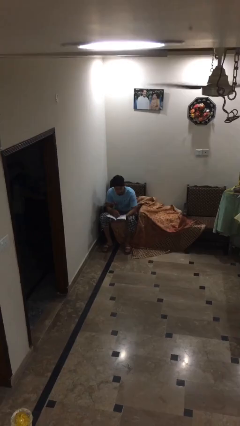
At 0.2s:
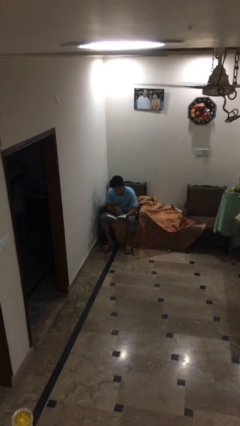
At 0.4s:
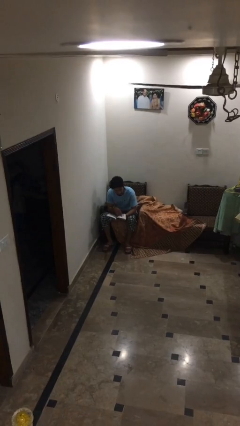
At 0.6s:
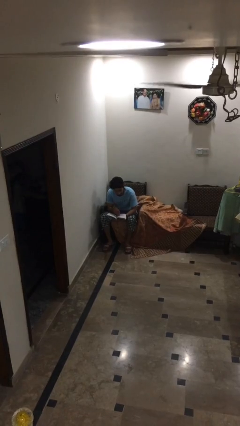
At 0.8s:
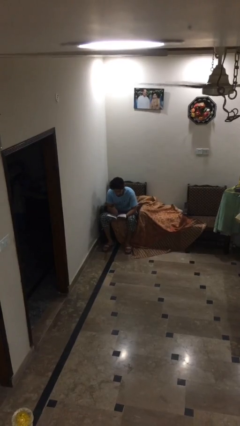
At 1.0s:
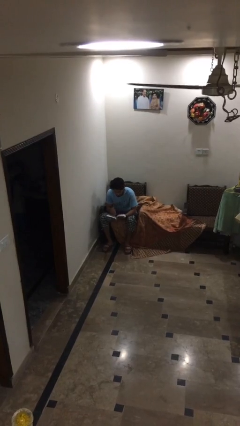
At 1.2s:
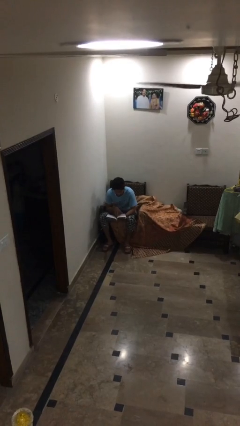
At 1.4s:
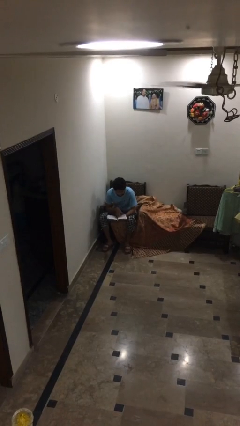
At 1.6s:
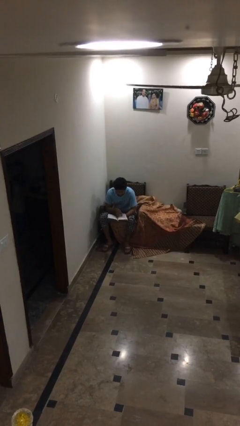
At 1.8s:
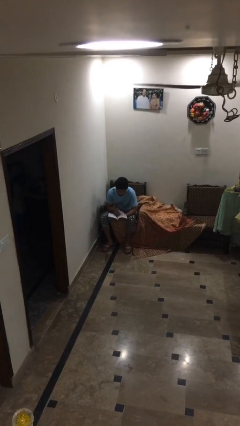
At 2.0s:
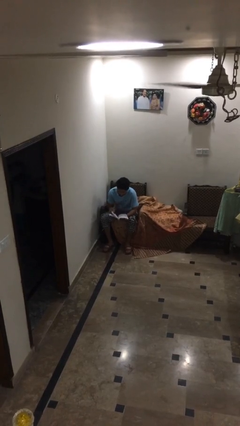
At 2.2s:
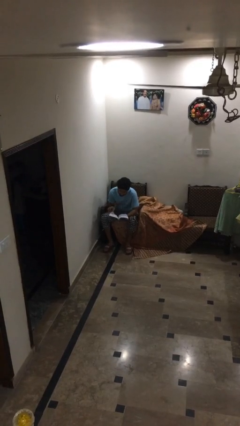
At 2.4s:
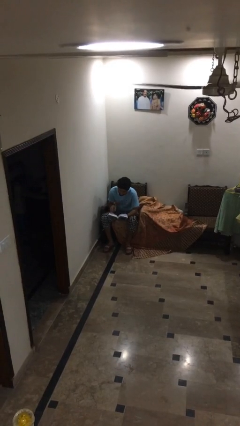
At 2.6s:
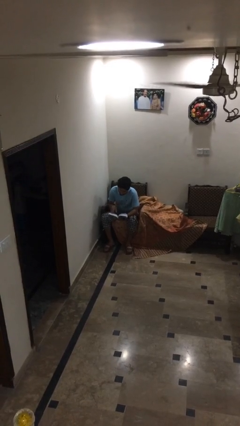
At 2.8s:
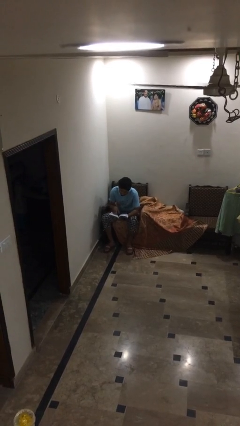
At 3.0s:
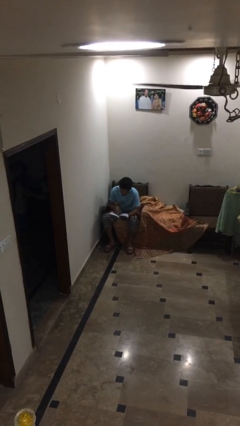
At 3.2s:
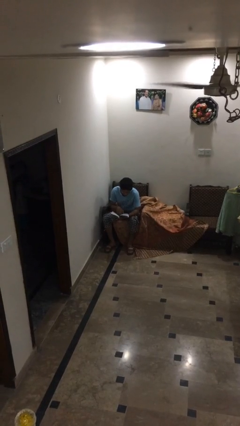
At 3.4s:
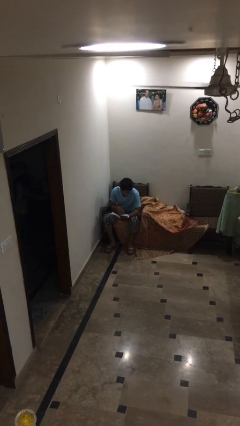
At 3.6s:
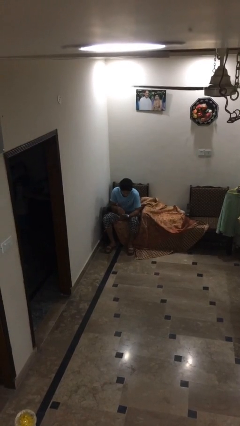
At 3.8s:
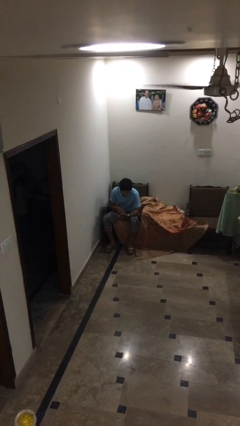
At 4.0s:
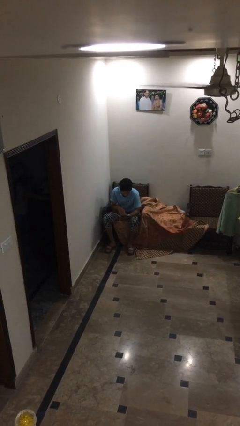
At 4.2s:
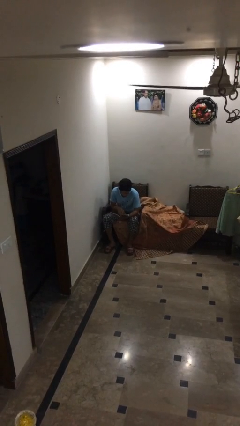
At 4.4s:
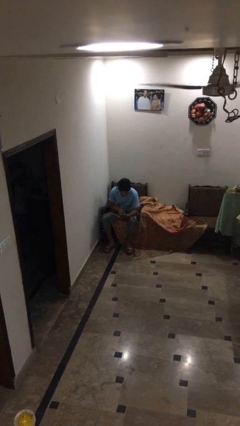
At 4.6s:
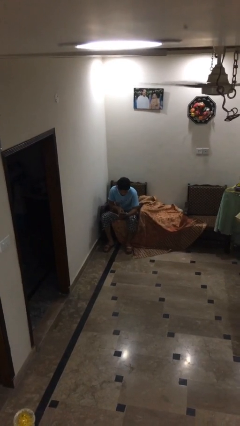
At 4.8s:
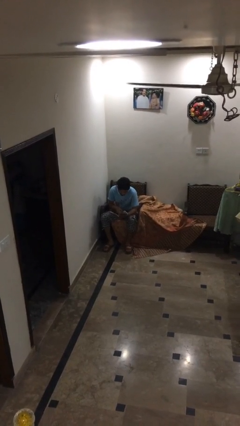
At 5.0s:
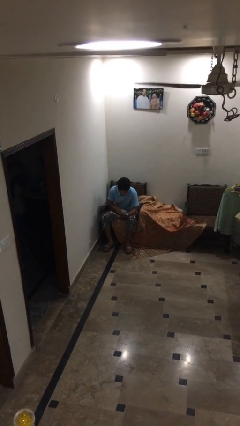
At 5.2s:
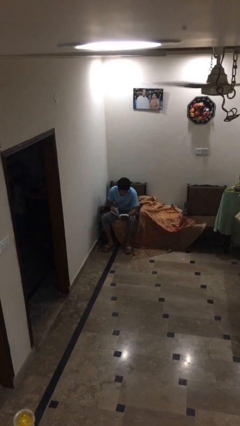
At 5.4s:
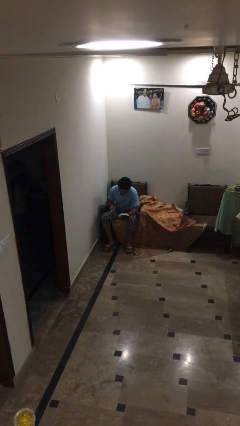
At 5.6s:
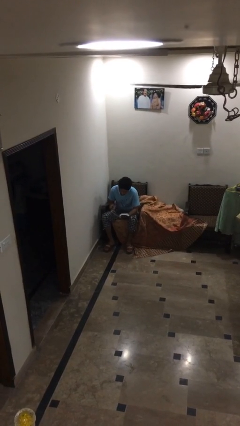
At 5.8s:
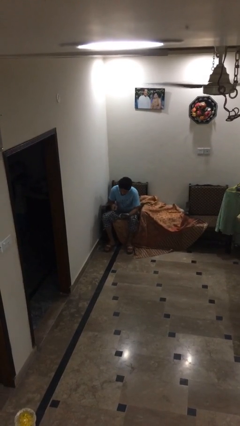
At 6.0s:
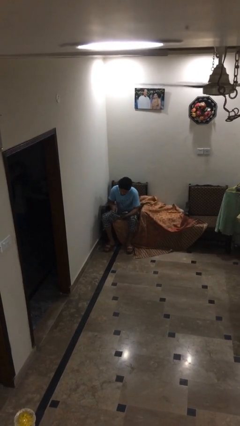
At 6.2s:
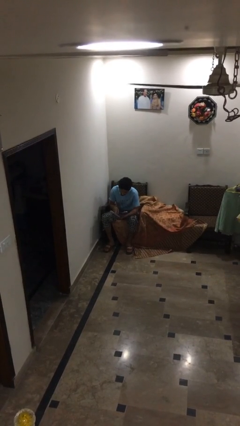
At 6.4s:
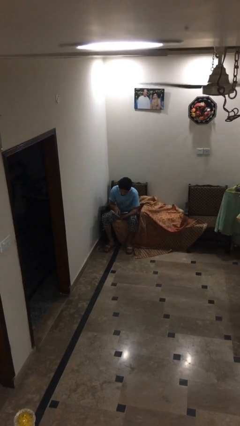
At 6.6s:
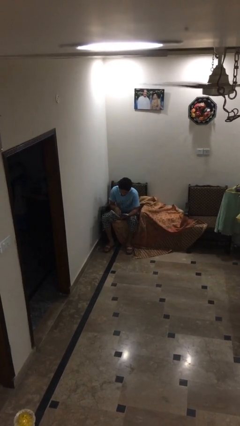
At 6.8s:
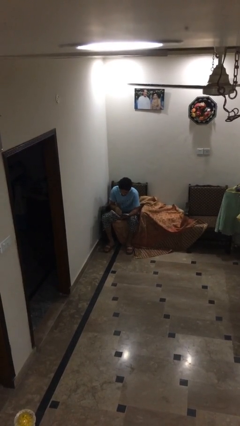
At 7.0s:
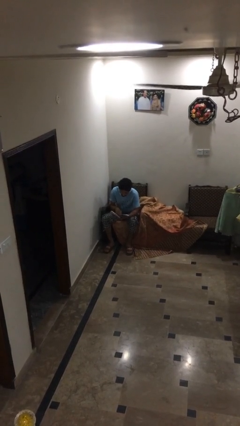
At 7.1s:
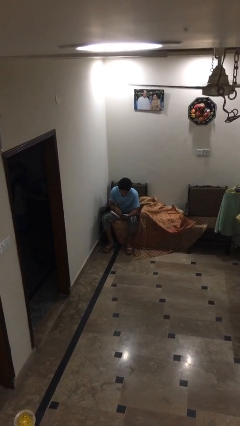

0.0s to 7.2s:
person reads document

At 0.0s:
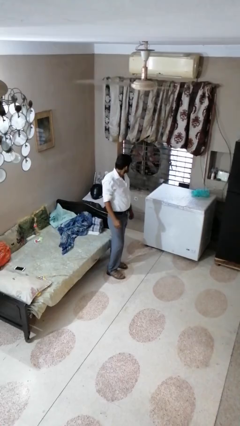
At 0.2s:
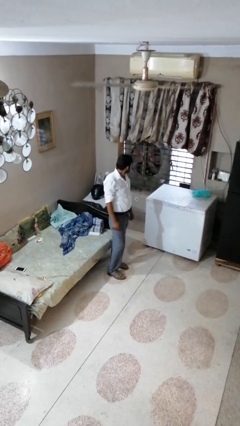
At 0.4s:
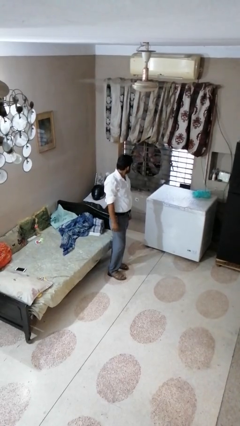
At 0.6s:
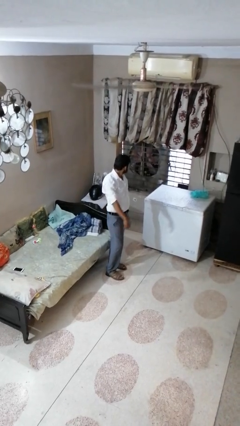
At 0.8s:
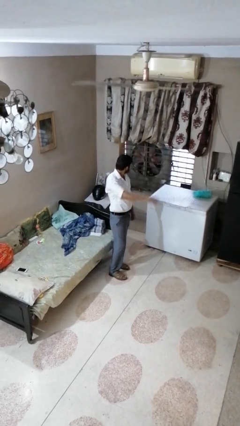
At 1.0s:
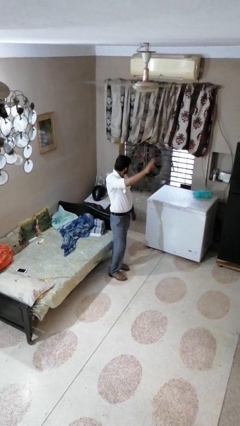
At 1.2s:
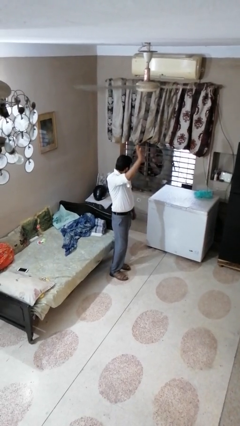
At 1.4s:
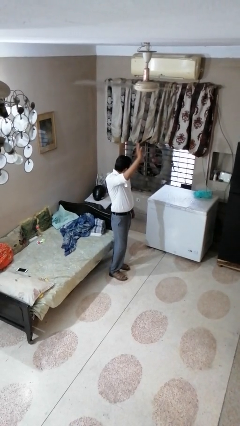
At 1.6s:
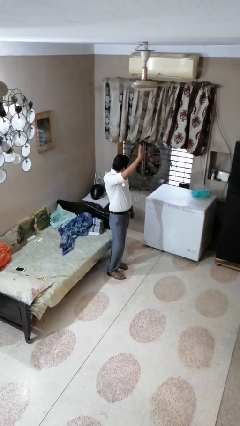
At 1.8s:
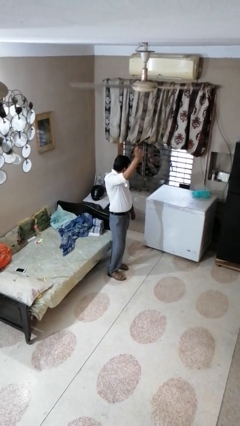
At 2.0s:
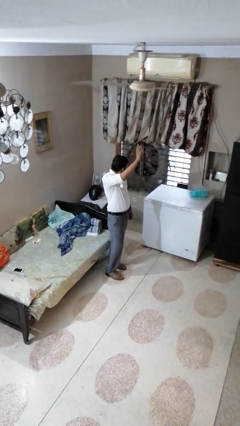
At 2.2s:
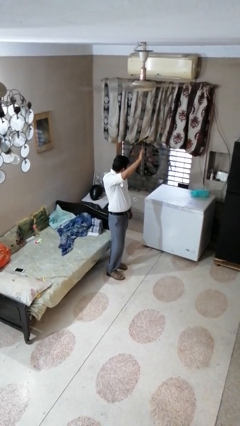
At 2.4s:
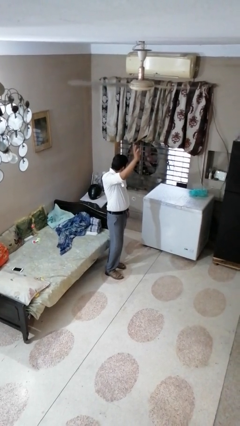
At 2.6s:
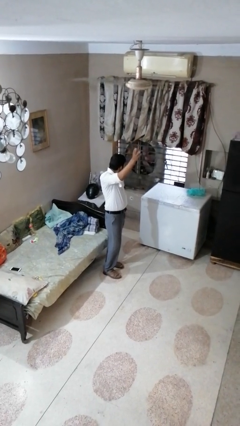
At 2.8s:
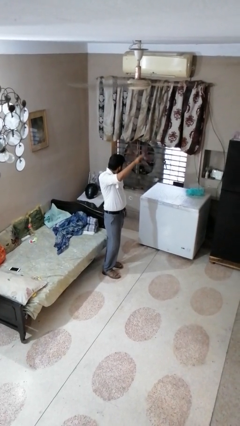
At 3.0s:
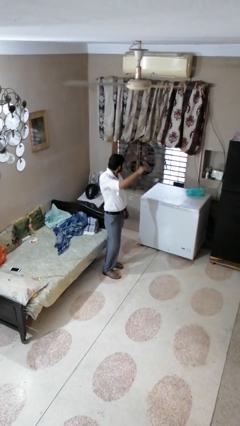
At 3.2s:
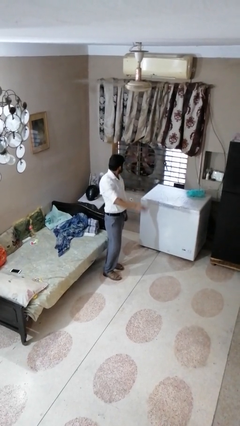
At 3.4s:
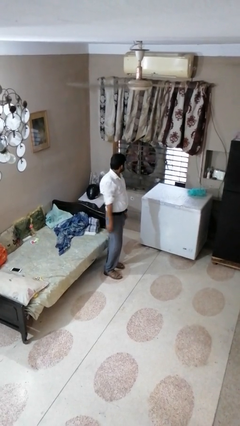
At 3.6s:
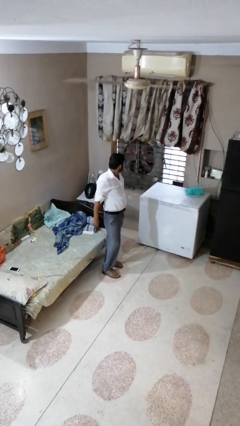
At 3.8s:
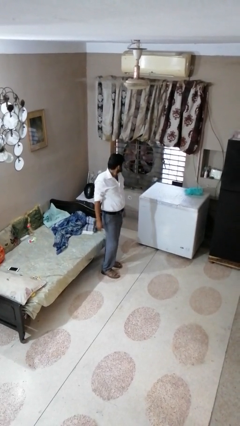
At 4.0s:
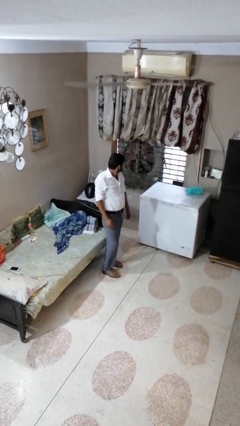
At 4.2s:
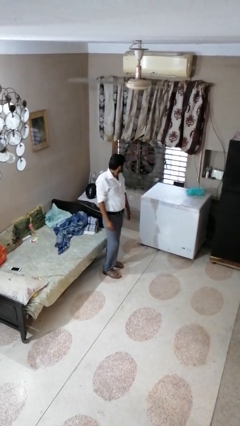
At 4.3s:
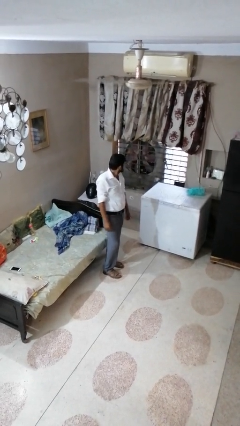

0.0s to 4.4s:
person waves at person

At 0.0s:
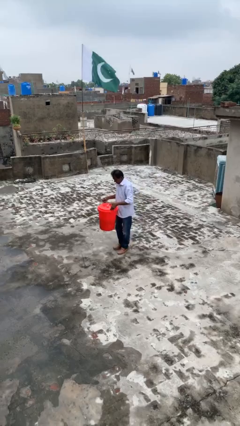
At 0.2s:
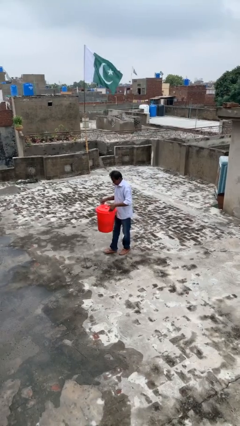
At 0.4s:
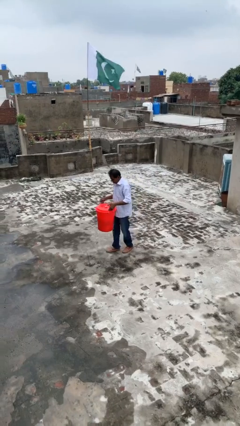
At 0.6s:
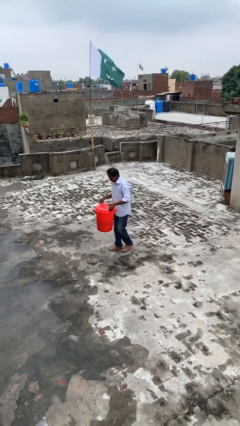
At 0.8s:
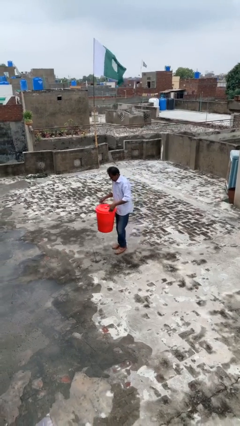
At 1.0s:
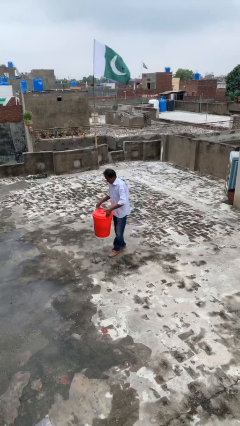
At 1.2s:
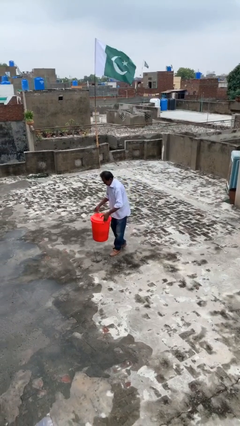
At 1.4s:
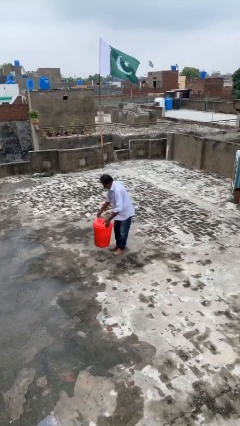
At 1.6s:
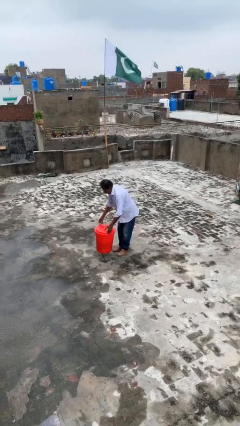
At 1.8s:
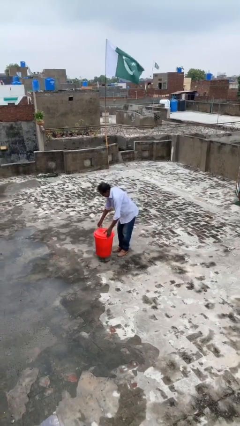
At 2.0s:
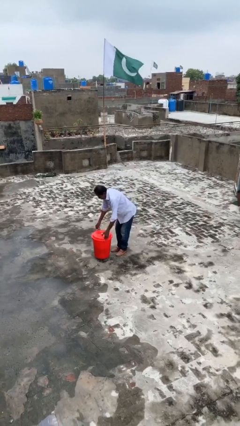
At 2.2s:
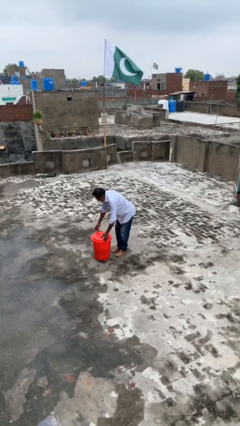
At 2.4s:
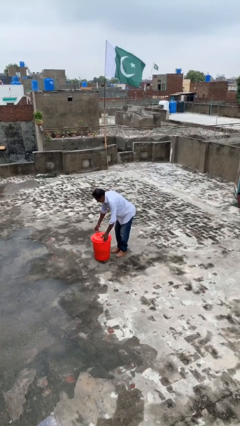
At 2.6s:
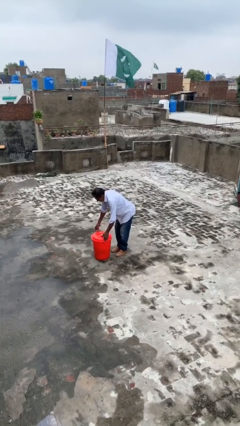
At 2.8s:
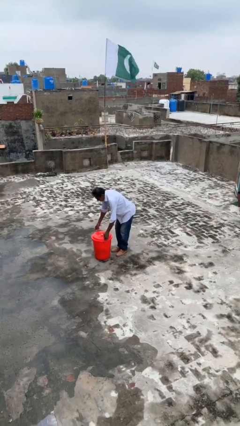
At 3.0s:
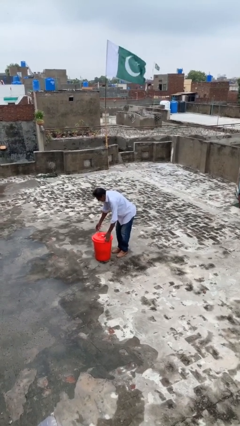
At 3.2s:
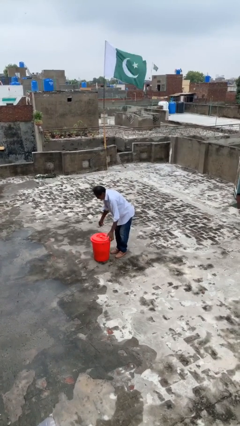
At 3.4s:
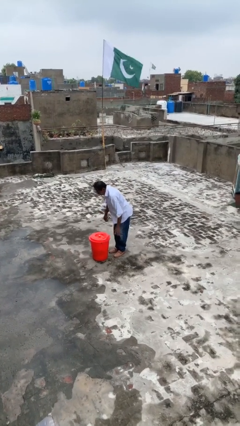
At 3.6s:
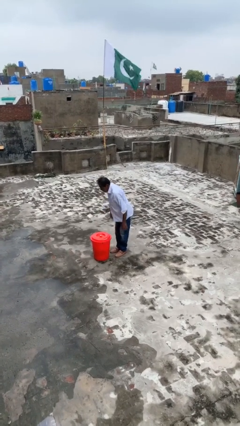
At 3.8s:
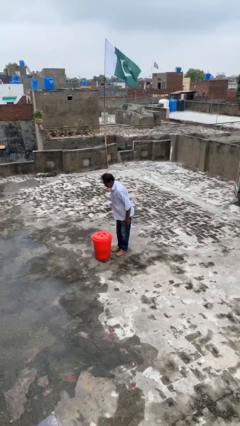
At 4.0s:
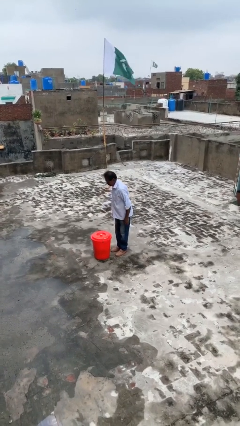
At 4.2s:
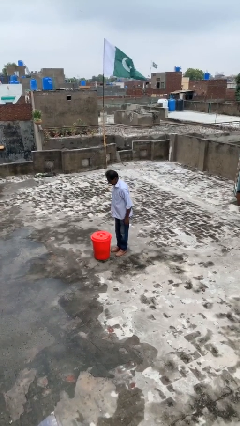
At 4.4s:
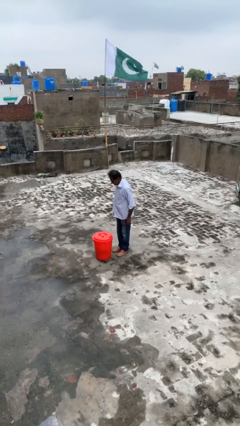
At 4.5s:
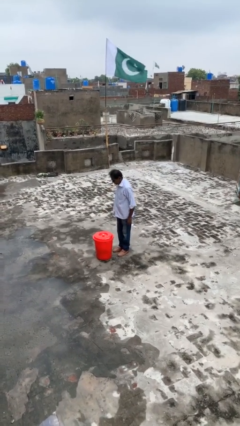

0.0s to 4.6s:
person puts down object on floor

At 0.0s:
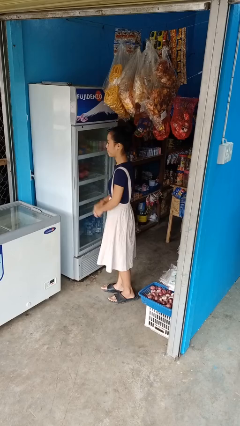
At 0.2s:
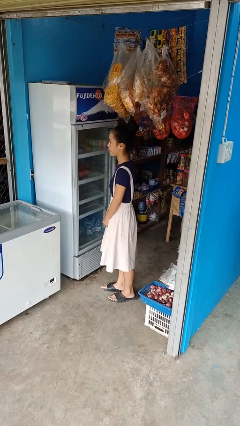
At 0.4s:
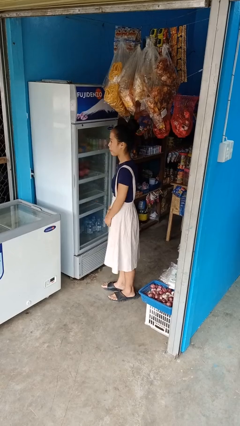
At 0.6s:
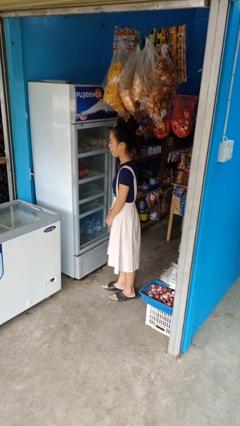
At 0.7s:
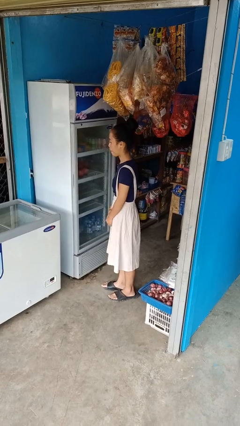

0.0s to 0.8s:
person closes refrigerator

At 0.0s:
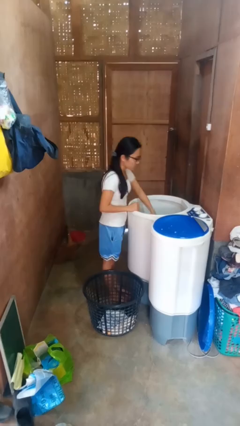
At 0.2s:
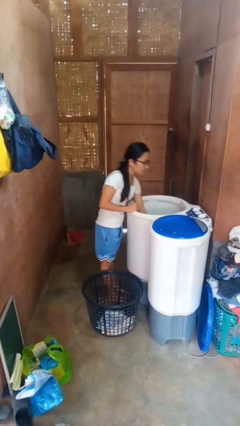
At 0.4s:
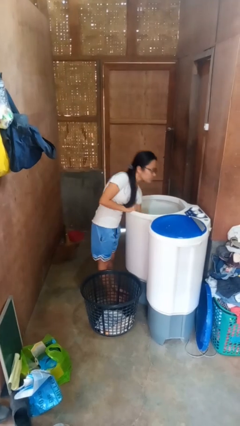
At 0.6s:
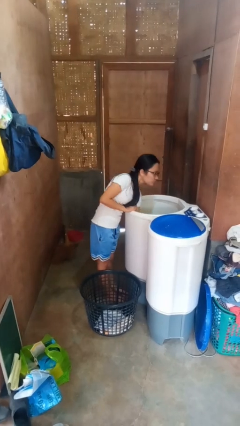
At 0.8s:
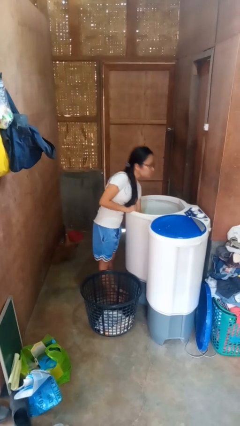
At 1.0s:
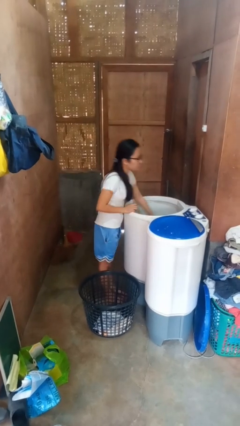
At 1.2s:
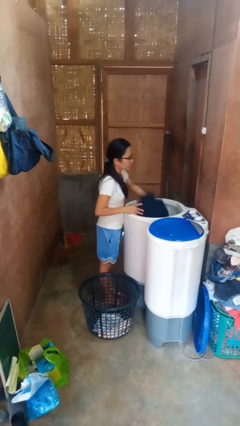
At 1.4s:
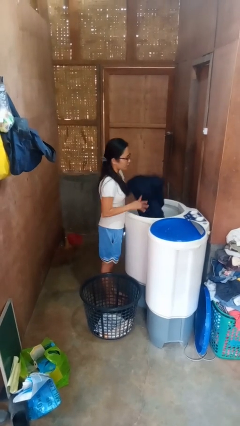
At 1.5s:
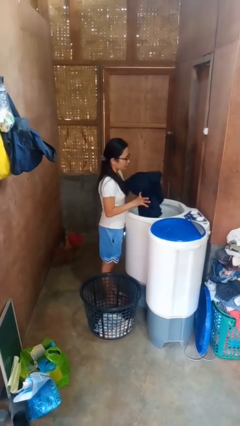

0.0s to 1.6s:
person unloads clotheswasher
